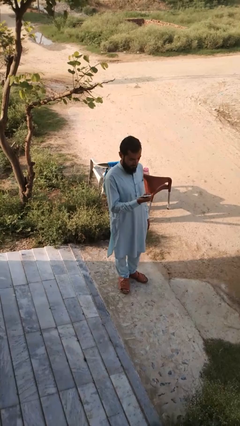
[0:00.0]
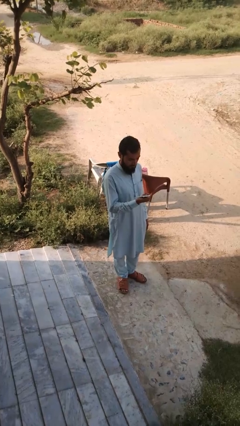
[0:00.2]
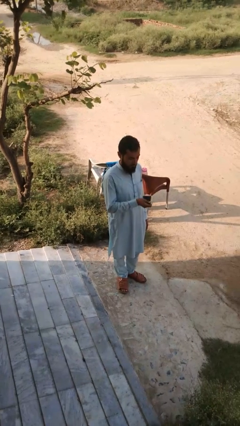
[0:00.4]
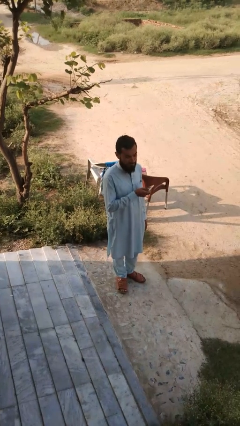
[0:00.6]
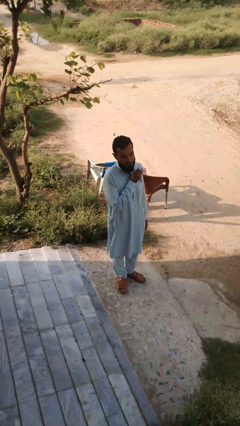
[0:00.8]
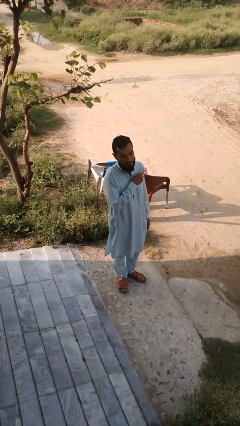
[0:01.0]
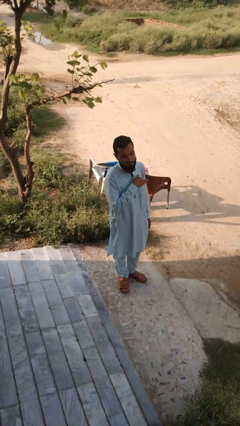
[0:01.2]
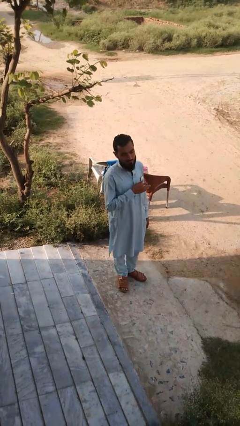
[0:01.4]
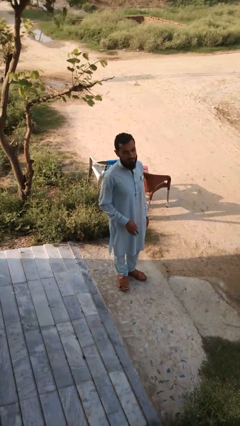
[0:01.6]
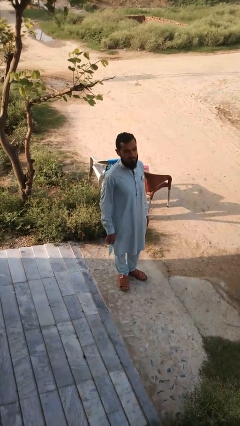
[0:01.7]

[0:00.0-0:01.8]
person puts phone into pocket

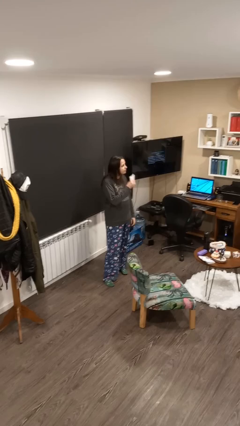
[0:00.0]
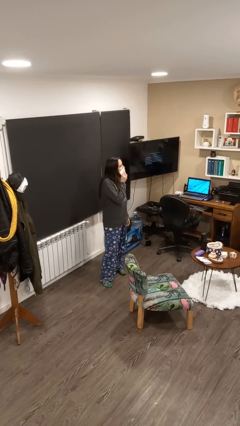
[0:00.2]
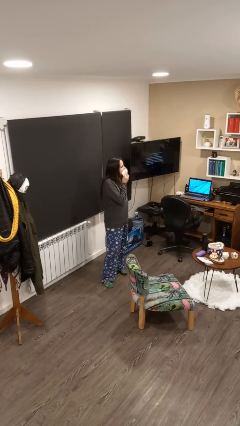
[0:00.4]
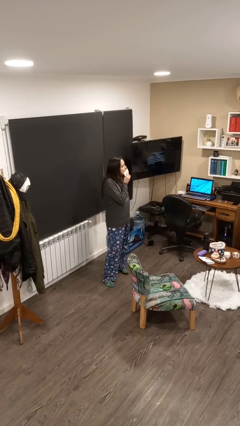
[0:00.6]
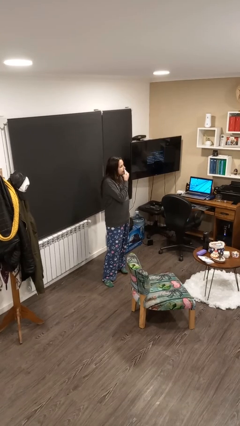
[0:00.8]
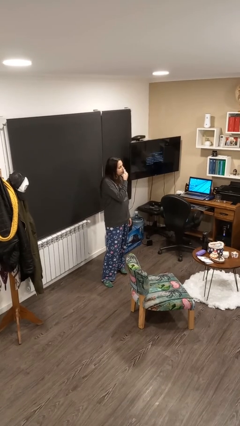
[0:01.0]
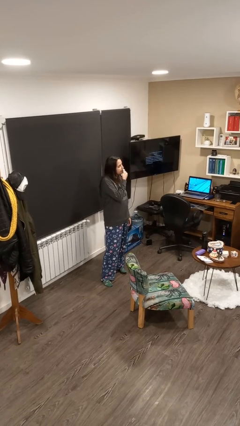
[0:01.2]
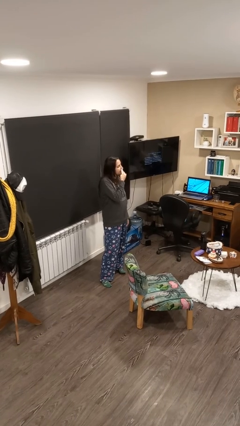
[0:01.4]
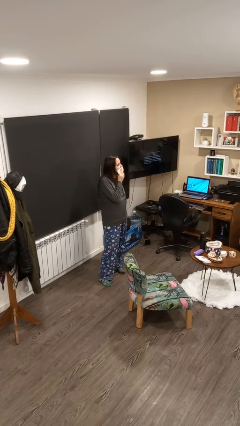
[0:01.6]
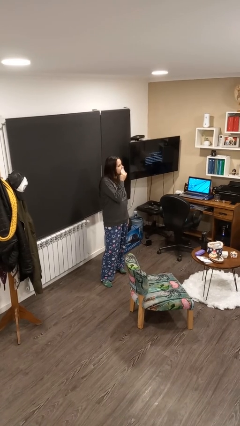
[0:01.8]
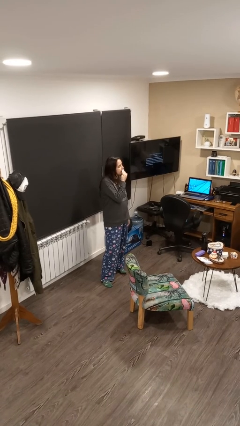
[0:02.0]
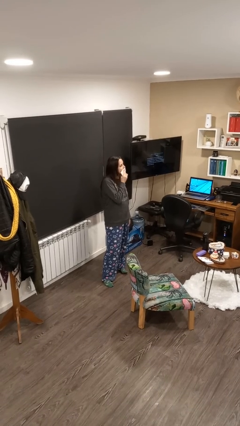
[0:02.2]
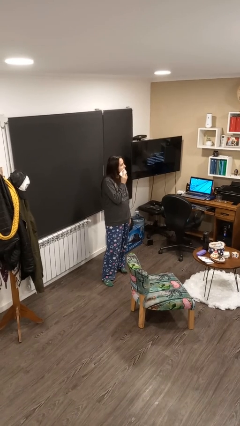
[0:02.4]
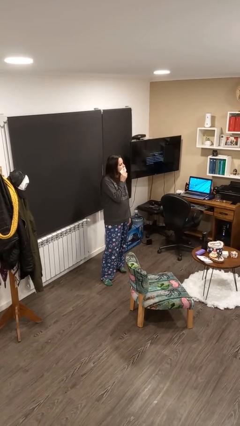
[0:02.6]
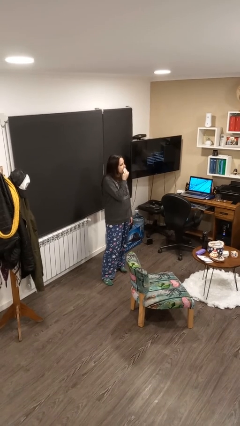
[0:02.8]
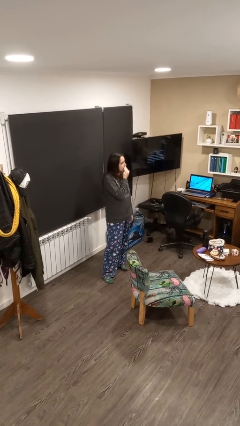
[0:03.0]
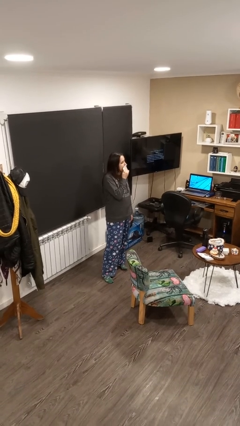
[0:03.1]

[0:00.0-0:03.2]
person wipes mouth with napkin

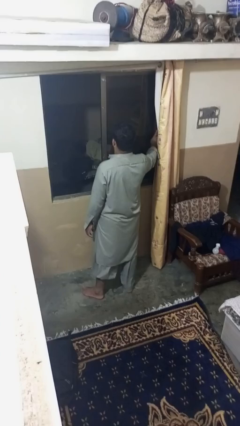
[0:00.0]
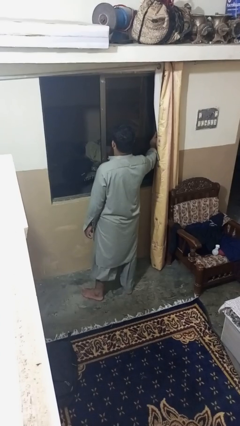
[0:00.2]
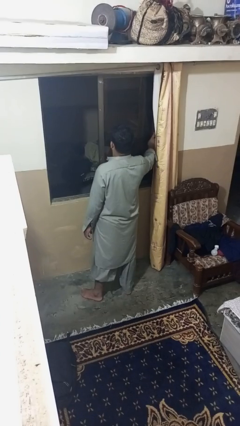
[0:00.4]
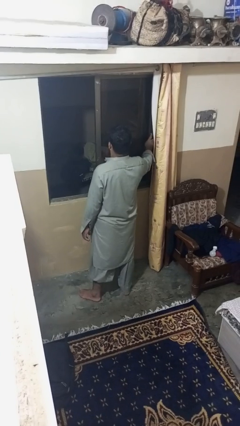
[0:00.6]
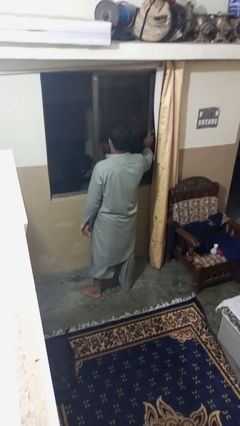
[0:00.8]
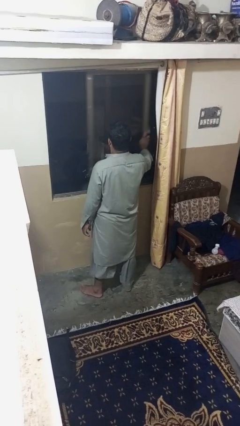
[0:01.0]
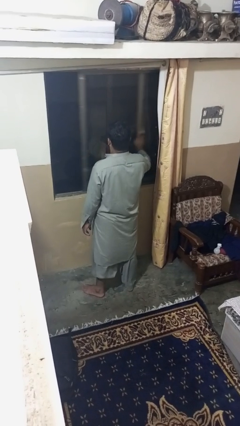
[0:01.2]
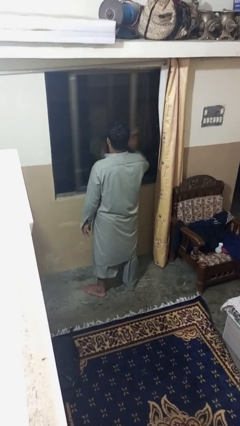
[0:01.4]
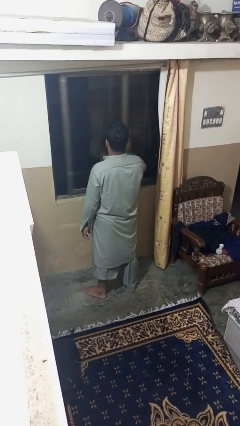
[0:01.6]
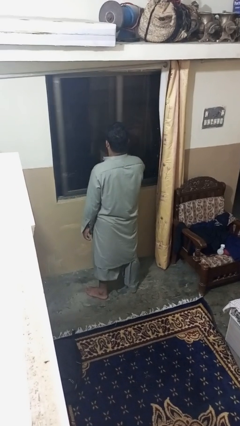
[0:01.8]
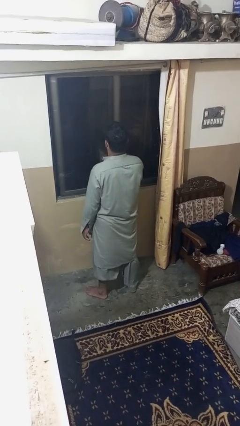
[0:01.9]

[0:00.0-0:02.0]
person closes home window

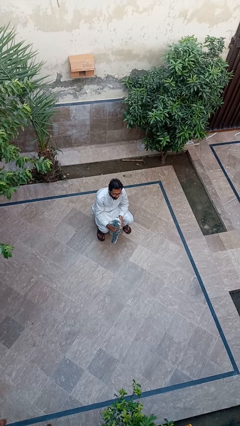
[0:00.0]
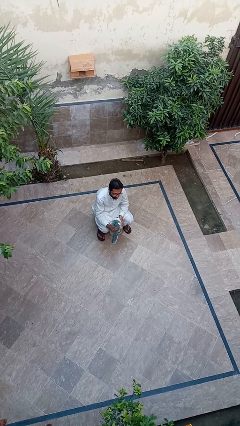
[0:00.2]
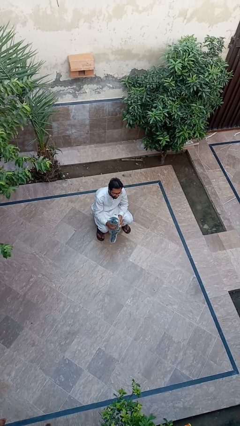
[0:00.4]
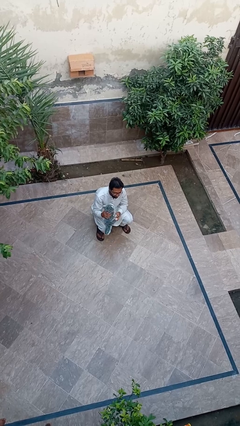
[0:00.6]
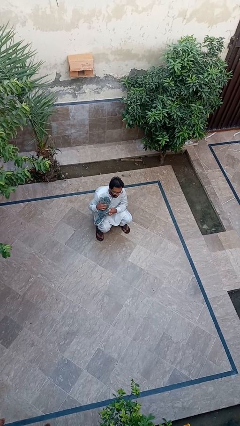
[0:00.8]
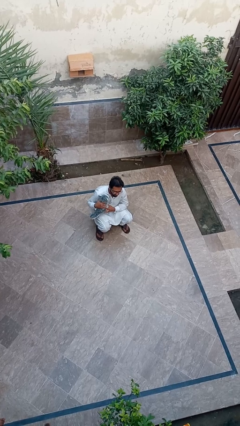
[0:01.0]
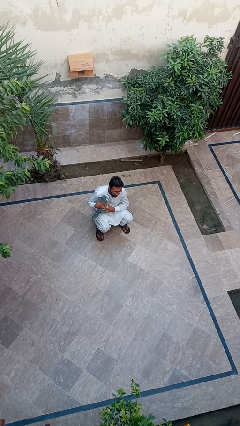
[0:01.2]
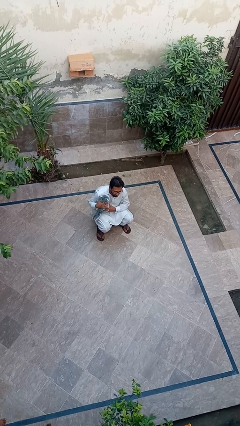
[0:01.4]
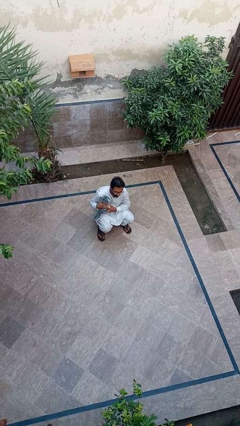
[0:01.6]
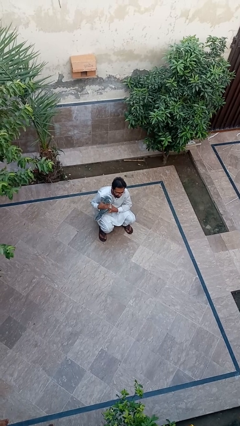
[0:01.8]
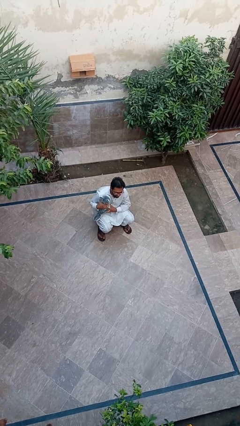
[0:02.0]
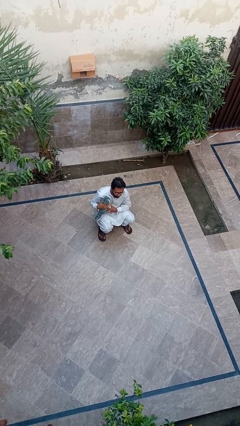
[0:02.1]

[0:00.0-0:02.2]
person hugs dog

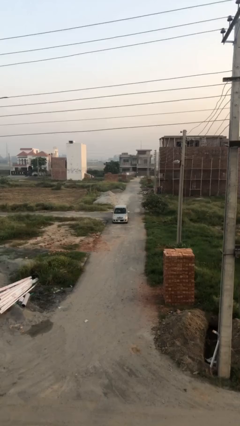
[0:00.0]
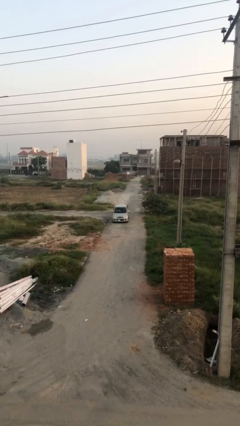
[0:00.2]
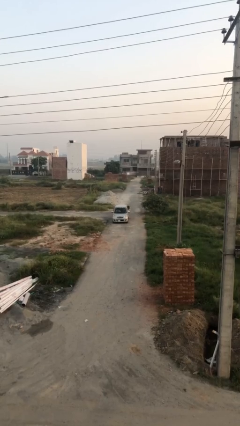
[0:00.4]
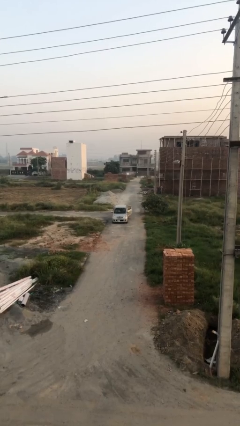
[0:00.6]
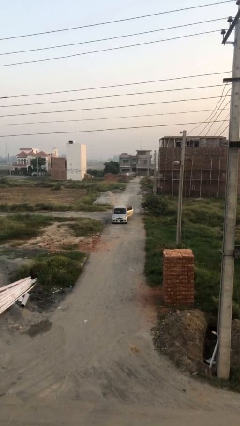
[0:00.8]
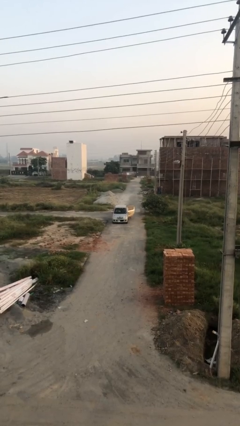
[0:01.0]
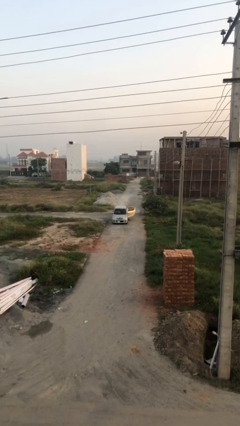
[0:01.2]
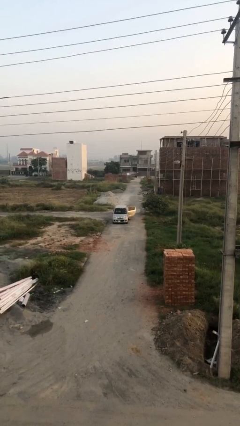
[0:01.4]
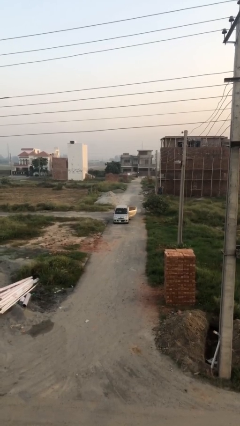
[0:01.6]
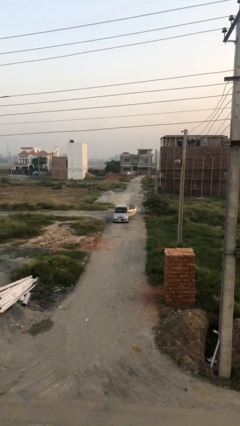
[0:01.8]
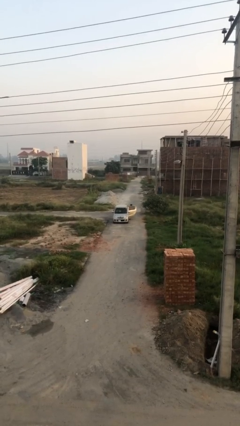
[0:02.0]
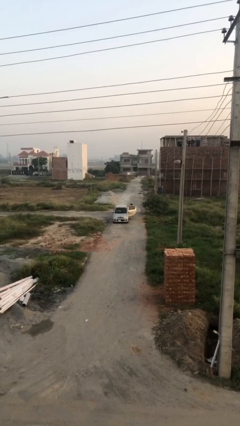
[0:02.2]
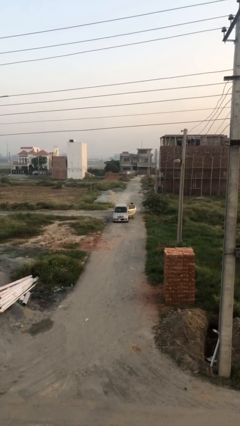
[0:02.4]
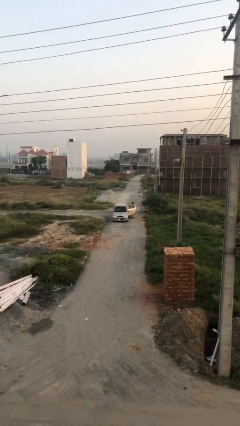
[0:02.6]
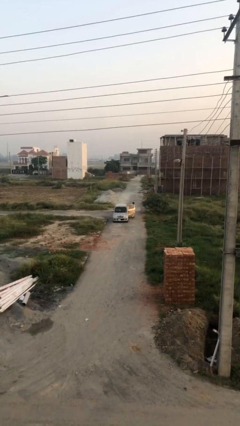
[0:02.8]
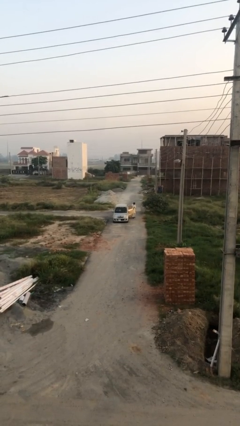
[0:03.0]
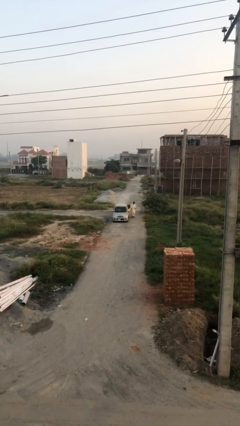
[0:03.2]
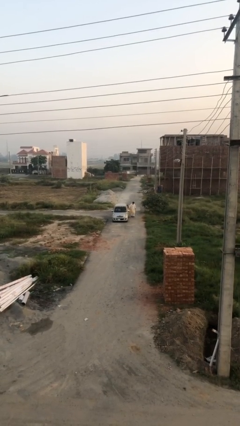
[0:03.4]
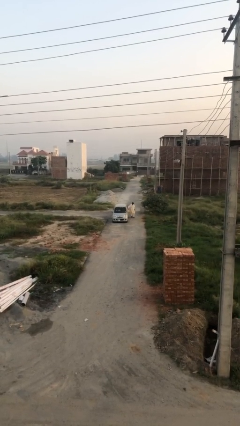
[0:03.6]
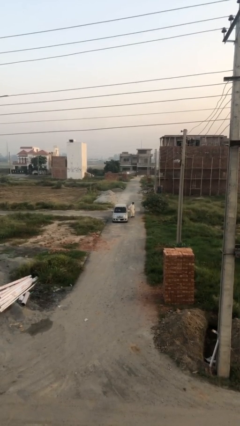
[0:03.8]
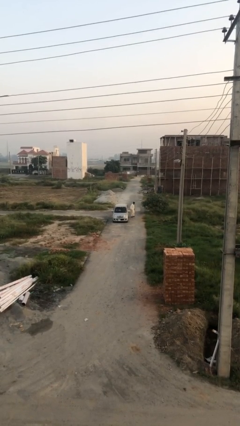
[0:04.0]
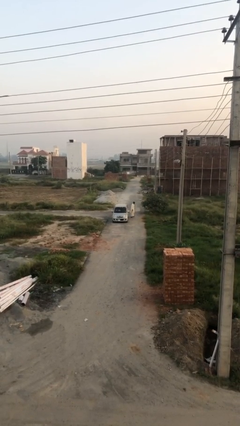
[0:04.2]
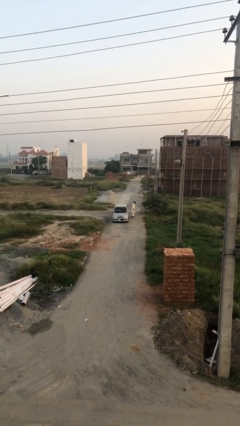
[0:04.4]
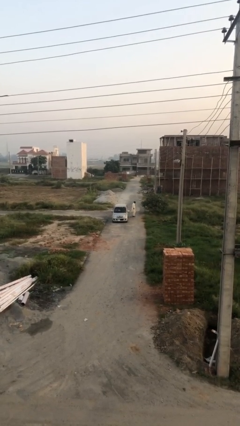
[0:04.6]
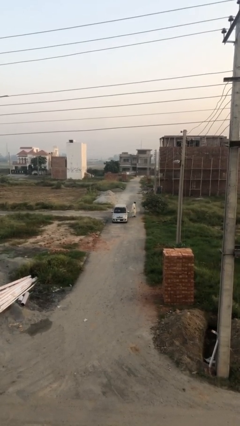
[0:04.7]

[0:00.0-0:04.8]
car drops off person

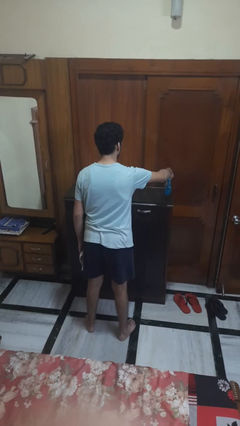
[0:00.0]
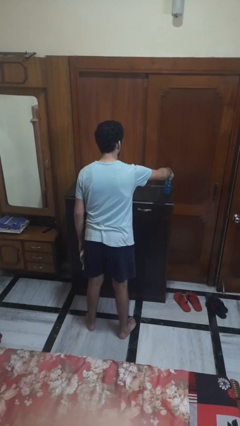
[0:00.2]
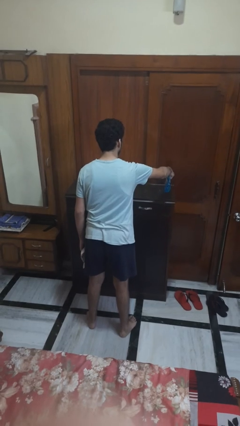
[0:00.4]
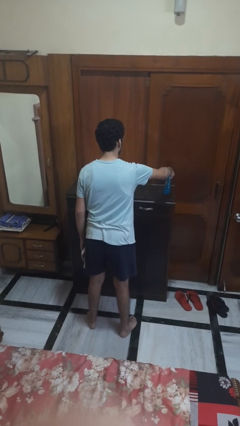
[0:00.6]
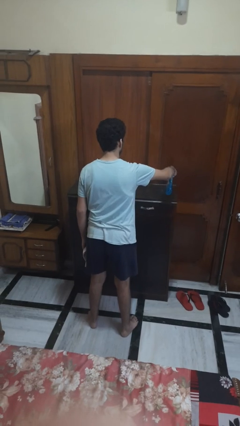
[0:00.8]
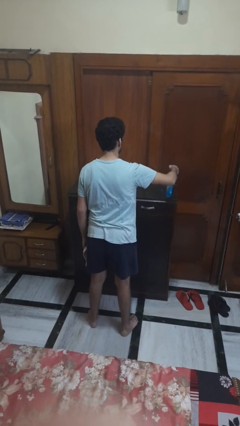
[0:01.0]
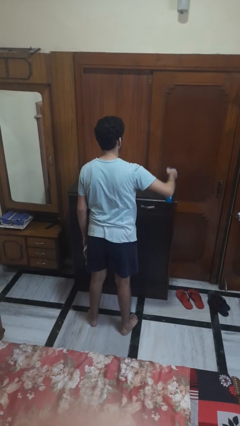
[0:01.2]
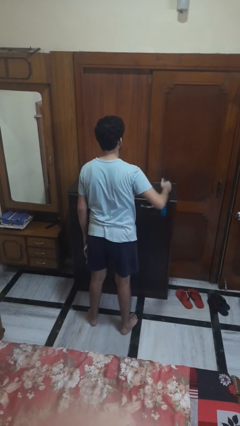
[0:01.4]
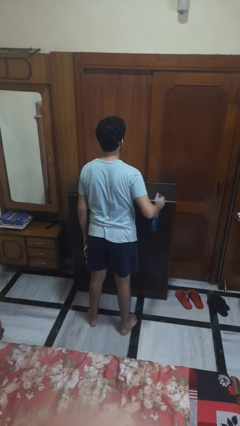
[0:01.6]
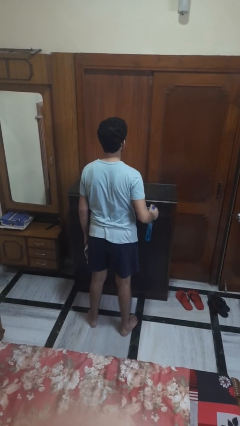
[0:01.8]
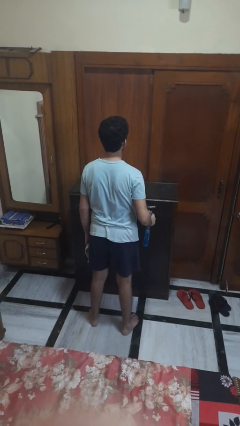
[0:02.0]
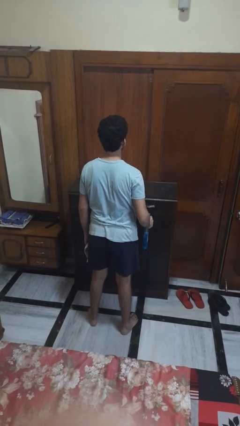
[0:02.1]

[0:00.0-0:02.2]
person sprays from bottle

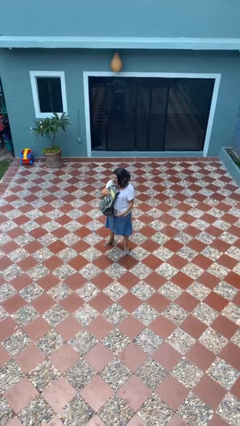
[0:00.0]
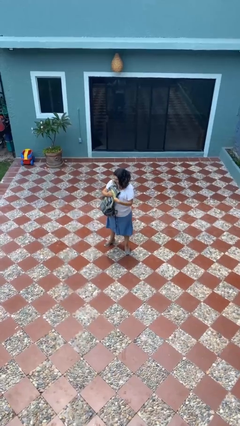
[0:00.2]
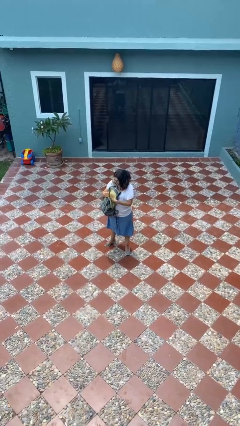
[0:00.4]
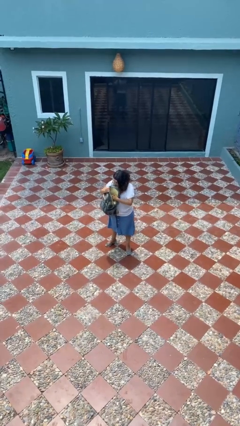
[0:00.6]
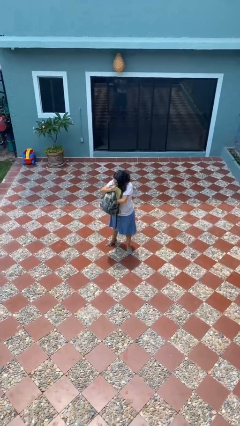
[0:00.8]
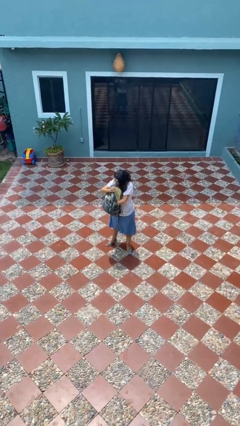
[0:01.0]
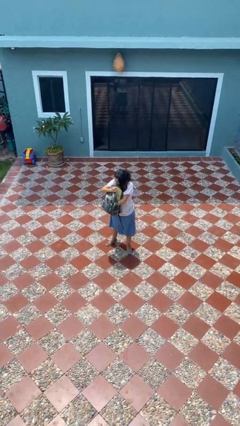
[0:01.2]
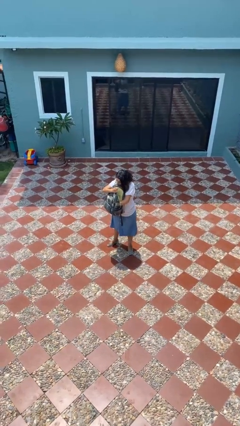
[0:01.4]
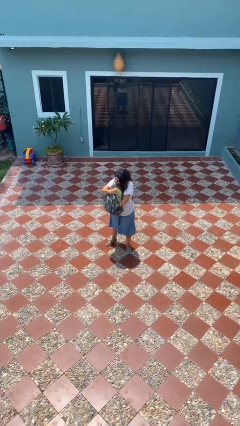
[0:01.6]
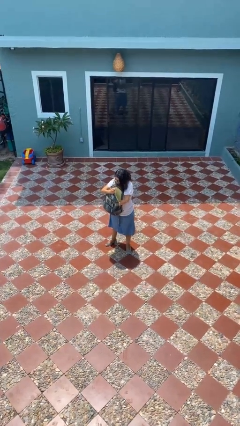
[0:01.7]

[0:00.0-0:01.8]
person searches in backpack
